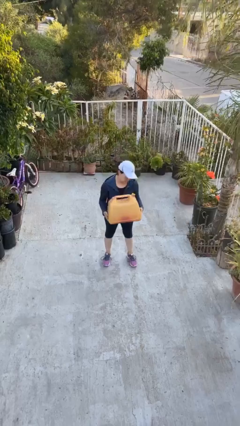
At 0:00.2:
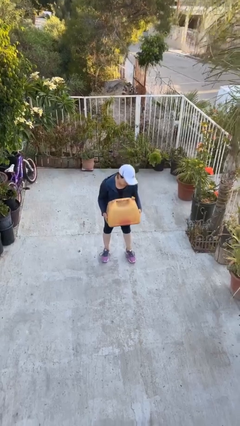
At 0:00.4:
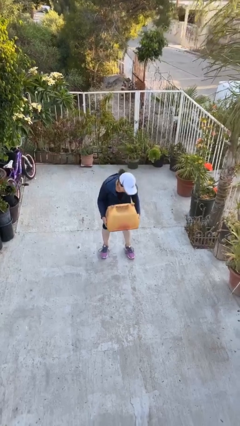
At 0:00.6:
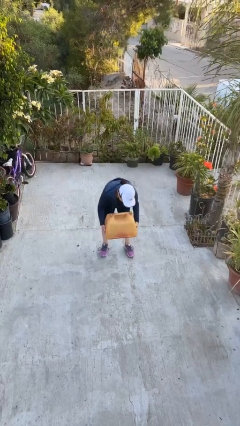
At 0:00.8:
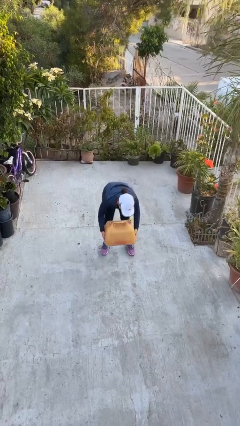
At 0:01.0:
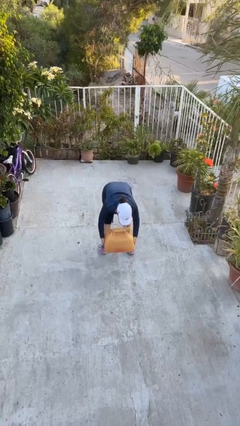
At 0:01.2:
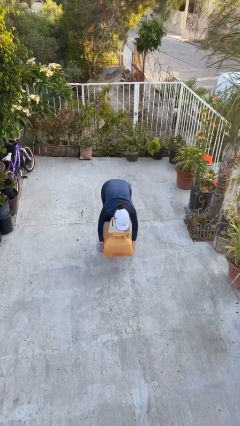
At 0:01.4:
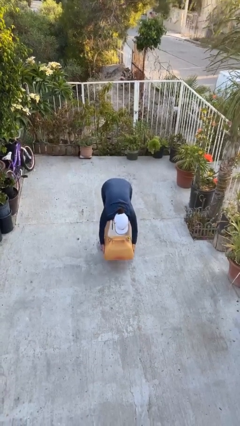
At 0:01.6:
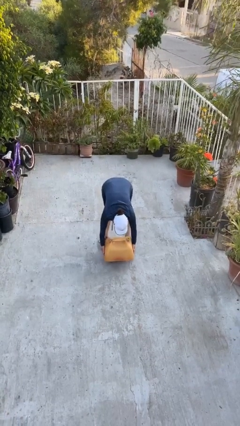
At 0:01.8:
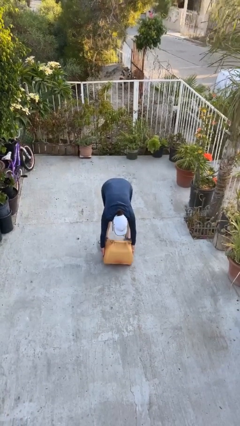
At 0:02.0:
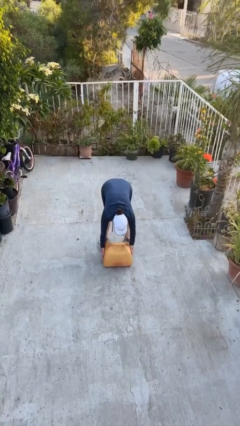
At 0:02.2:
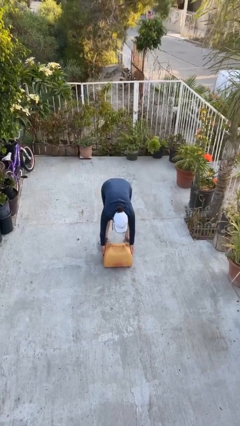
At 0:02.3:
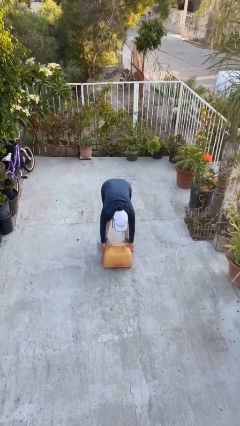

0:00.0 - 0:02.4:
person puts down object on floor

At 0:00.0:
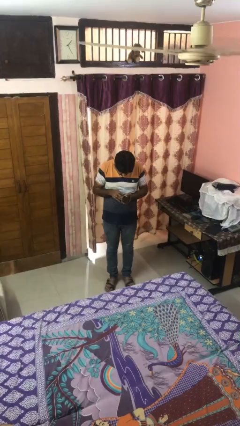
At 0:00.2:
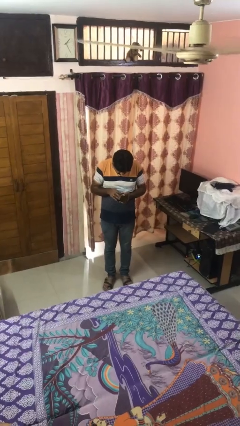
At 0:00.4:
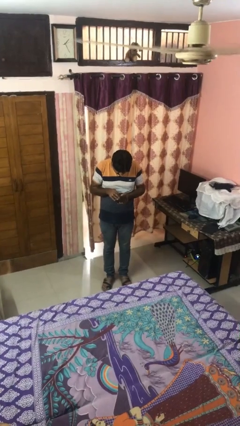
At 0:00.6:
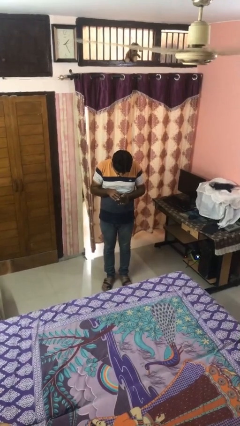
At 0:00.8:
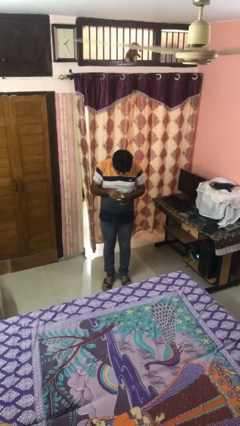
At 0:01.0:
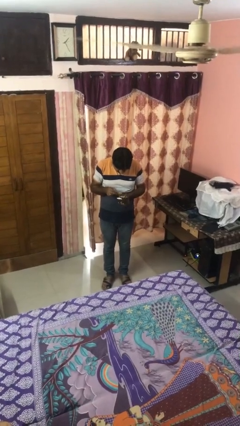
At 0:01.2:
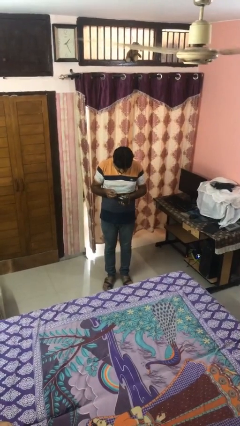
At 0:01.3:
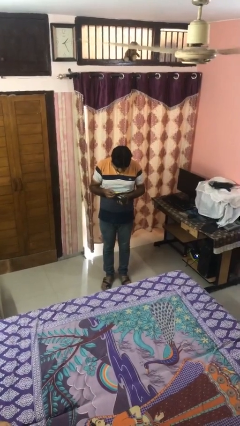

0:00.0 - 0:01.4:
person takes object from purse

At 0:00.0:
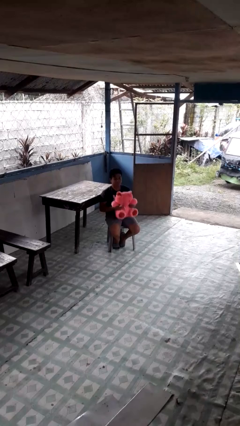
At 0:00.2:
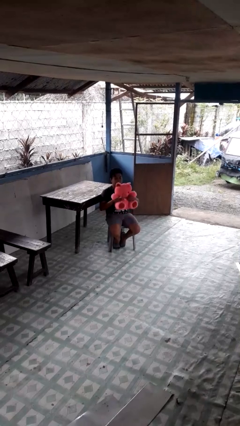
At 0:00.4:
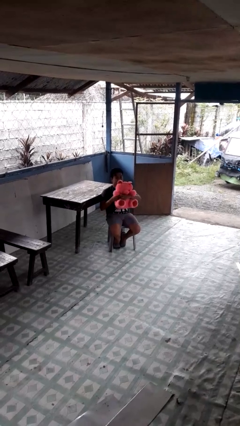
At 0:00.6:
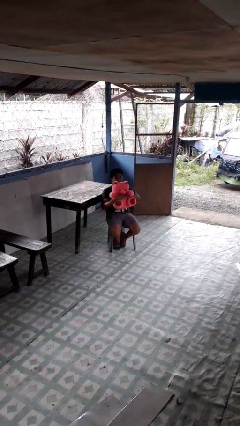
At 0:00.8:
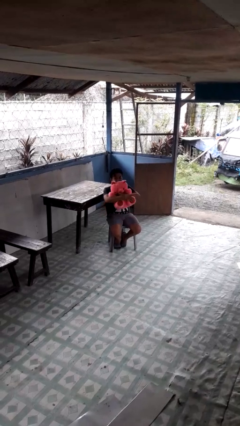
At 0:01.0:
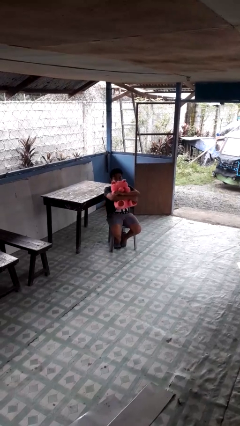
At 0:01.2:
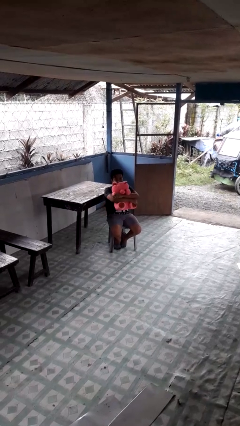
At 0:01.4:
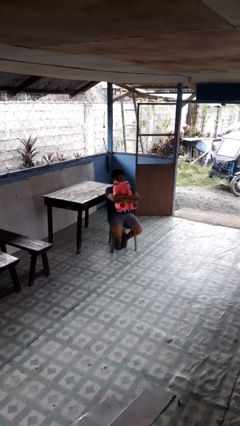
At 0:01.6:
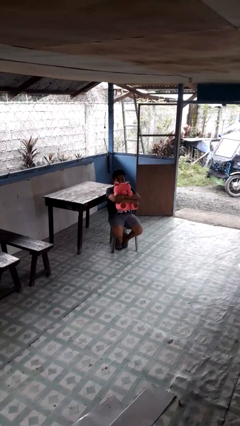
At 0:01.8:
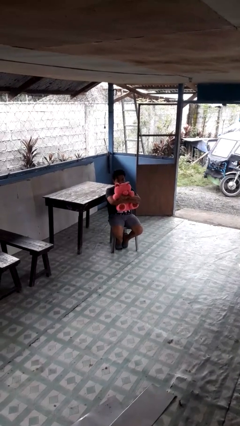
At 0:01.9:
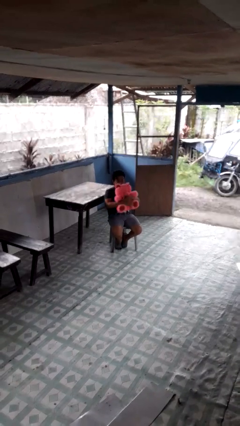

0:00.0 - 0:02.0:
person hugs stuffed animal

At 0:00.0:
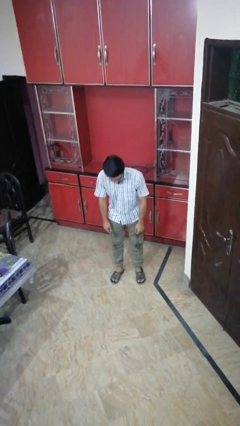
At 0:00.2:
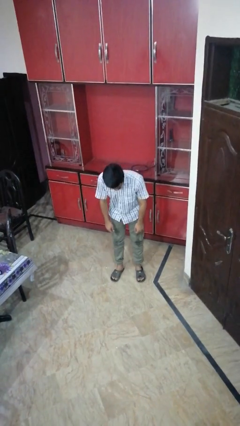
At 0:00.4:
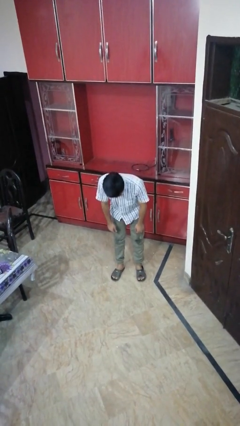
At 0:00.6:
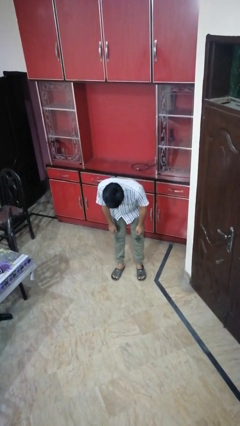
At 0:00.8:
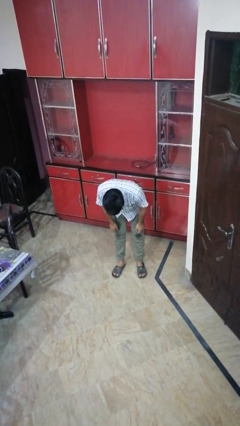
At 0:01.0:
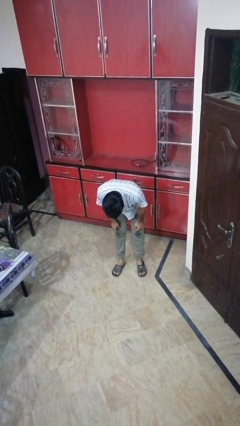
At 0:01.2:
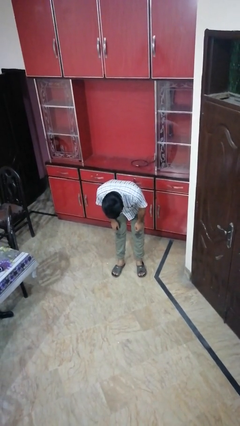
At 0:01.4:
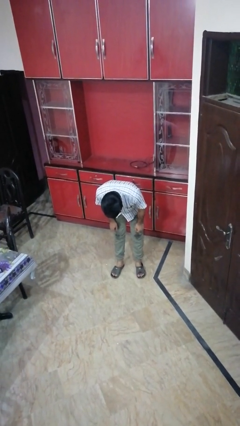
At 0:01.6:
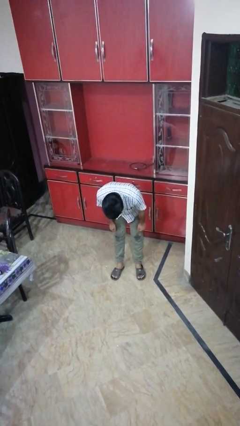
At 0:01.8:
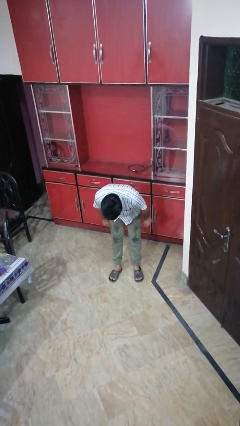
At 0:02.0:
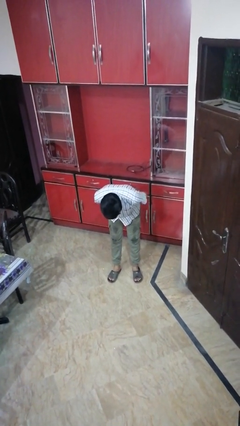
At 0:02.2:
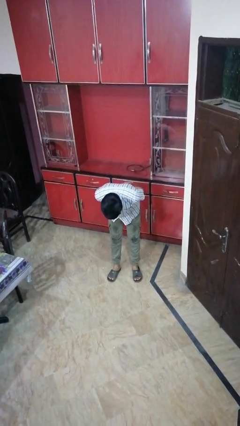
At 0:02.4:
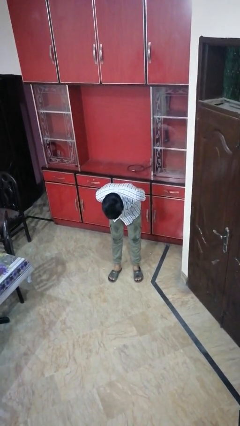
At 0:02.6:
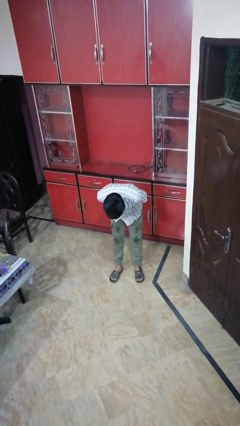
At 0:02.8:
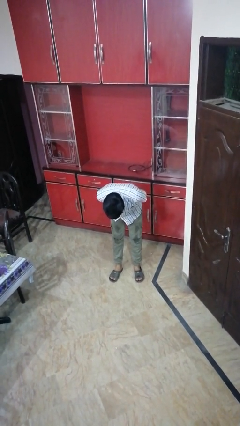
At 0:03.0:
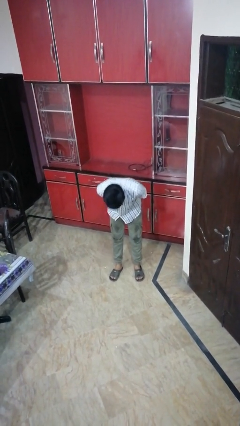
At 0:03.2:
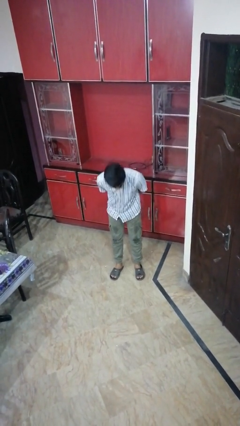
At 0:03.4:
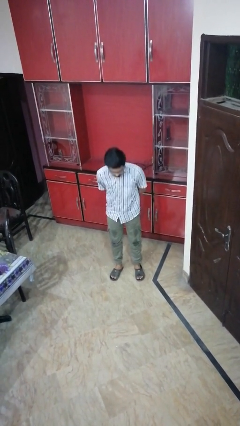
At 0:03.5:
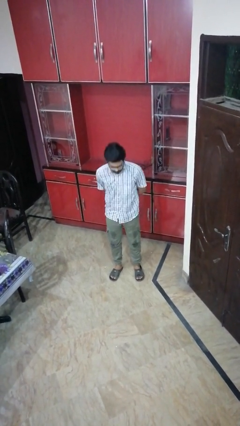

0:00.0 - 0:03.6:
person bows

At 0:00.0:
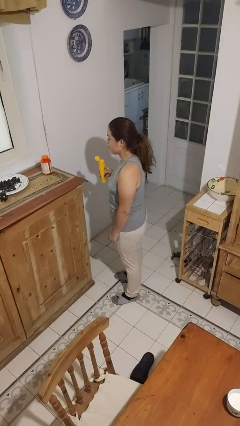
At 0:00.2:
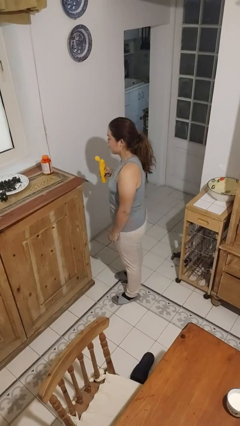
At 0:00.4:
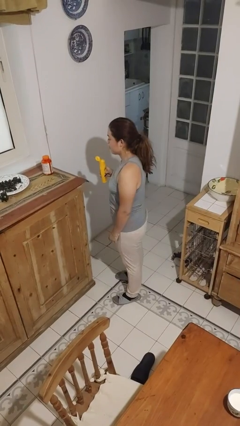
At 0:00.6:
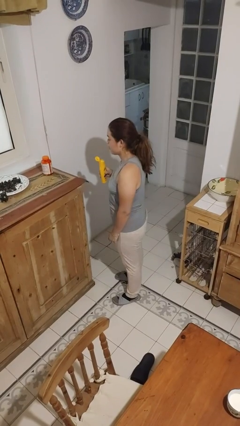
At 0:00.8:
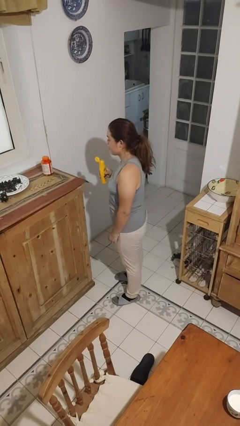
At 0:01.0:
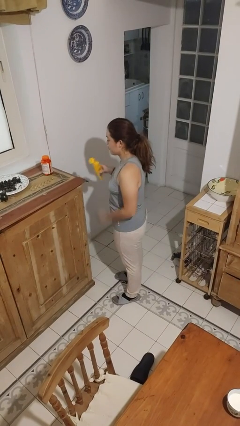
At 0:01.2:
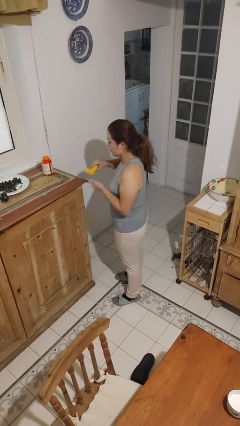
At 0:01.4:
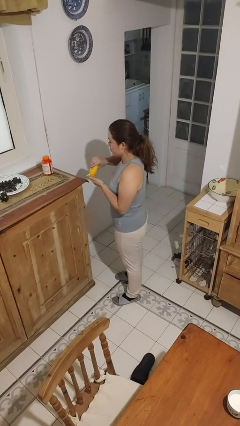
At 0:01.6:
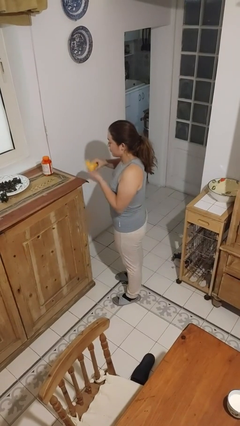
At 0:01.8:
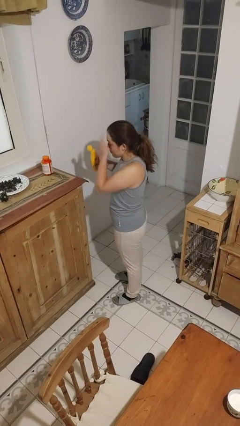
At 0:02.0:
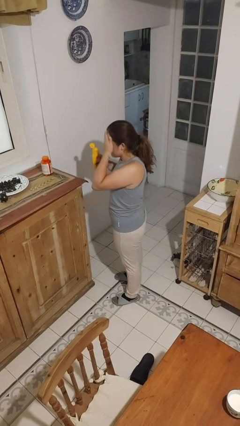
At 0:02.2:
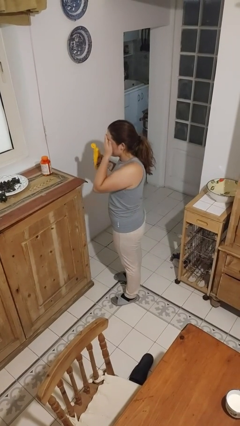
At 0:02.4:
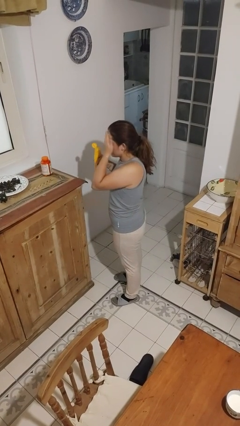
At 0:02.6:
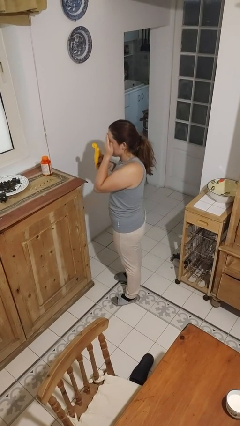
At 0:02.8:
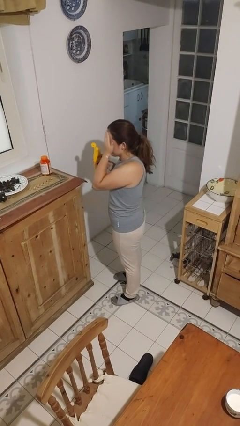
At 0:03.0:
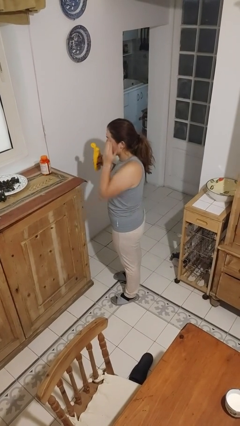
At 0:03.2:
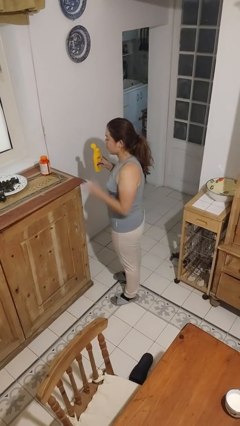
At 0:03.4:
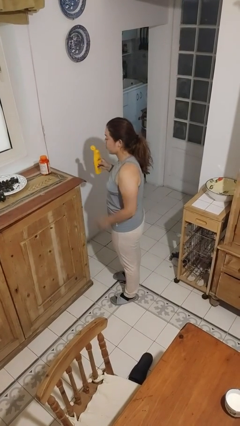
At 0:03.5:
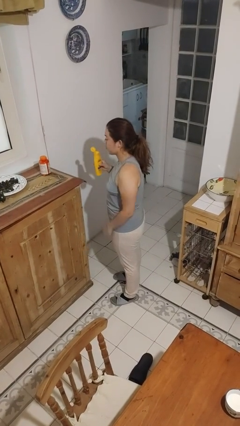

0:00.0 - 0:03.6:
person applies sunscreen

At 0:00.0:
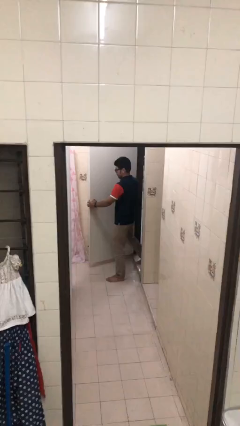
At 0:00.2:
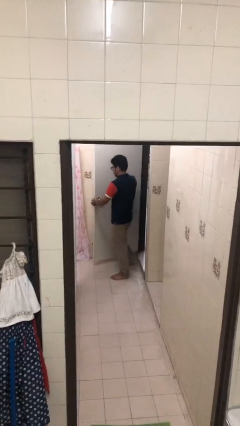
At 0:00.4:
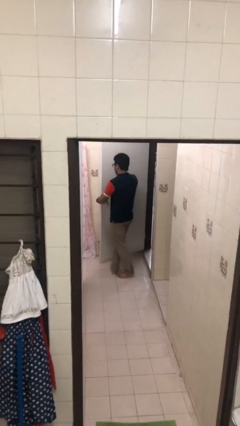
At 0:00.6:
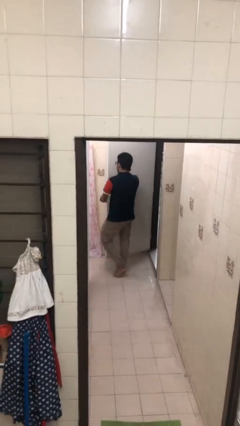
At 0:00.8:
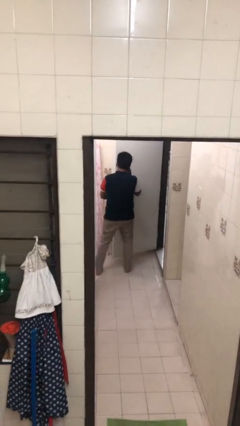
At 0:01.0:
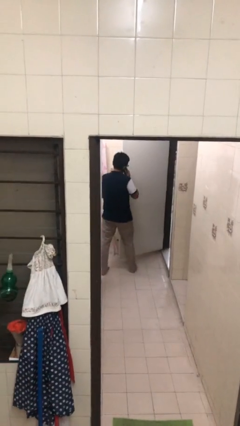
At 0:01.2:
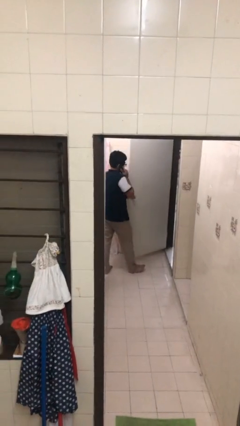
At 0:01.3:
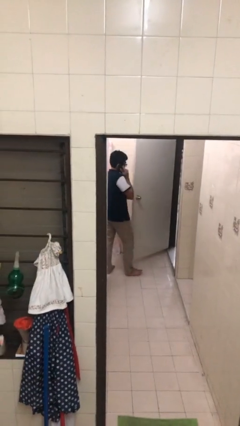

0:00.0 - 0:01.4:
person enters scene through structure

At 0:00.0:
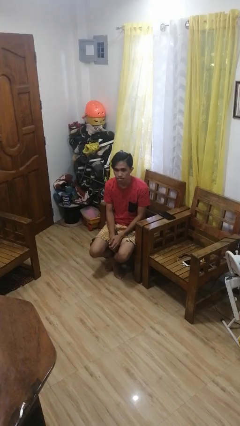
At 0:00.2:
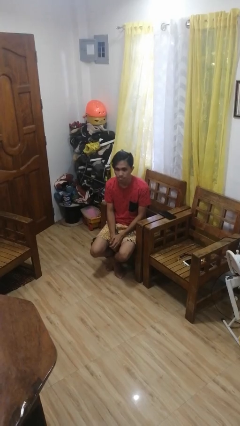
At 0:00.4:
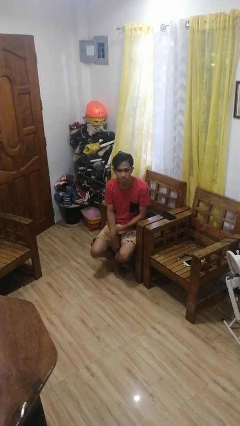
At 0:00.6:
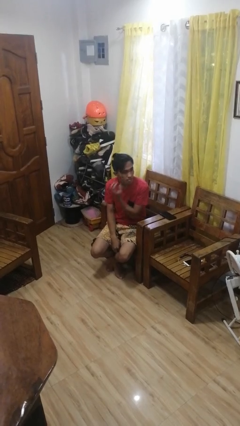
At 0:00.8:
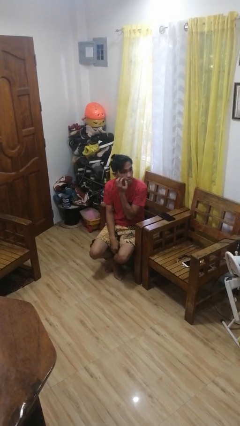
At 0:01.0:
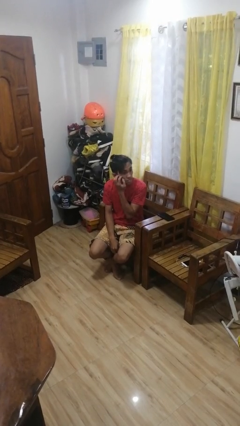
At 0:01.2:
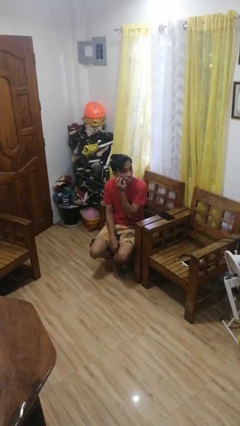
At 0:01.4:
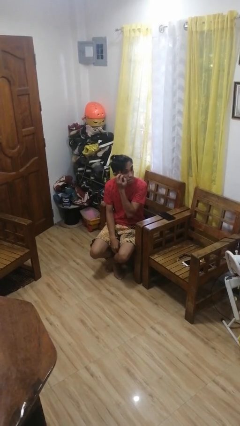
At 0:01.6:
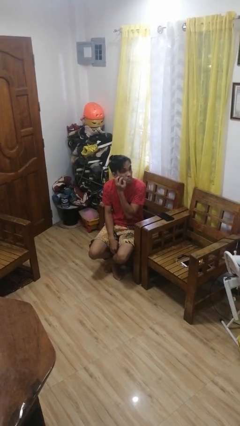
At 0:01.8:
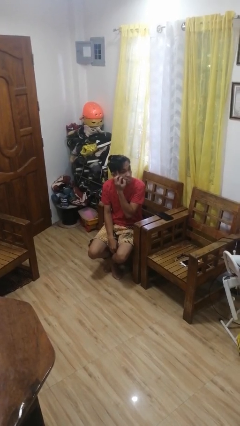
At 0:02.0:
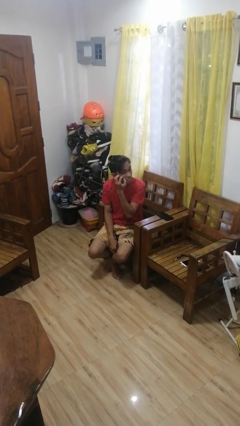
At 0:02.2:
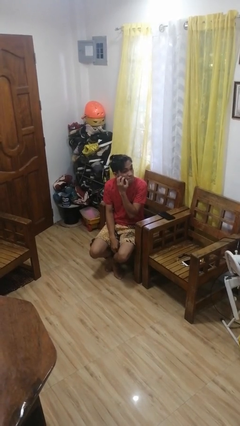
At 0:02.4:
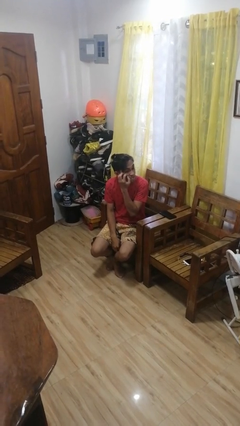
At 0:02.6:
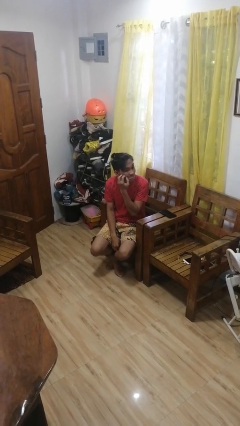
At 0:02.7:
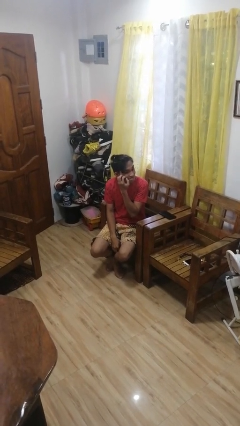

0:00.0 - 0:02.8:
person scratches face
